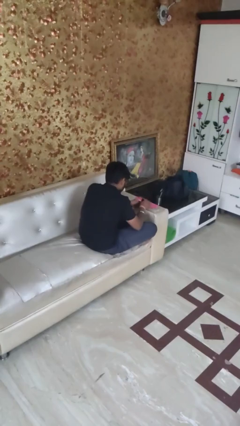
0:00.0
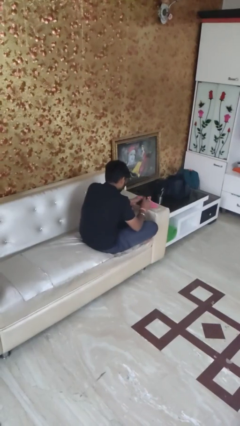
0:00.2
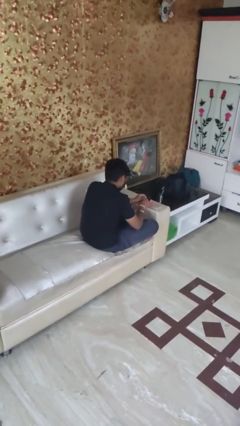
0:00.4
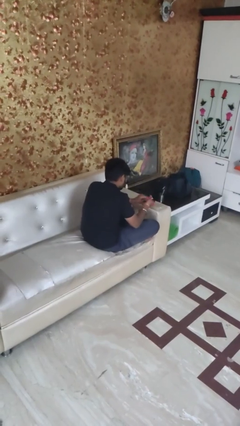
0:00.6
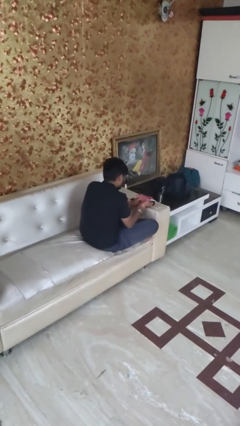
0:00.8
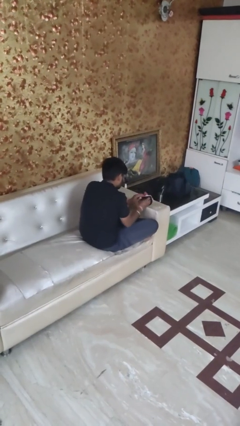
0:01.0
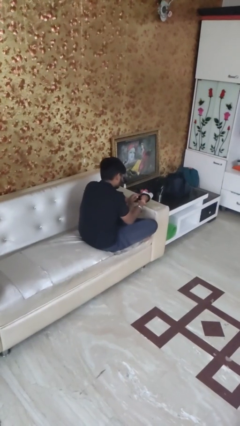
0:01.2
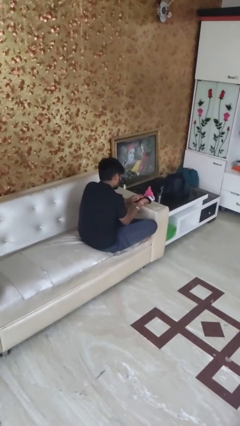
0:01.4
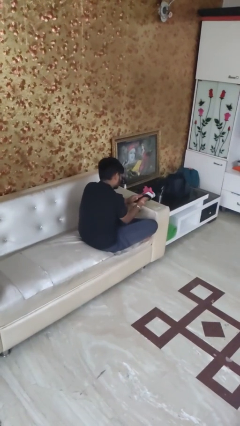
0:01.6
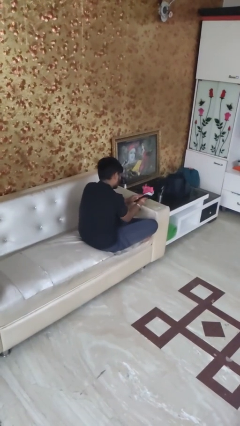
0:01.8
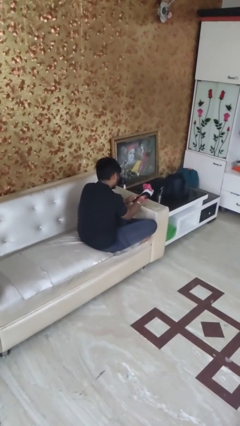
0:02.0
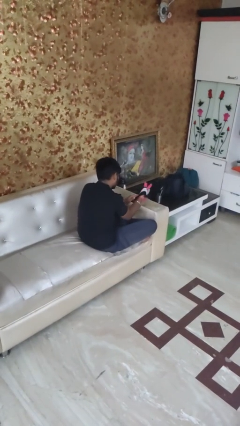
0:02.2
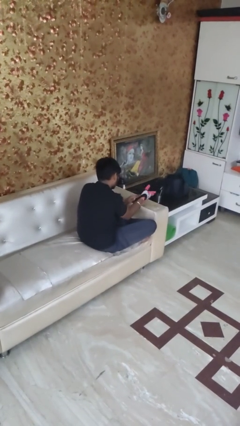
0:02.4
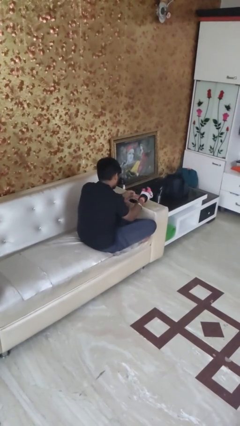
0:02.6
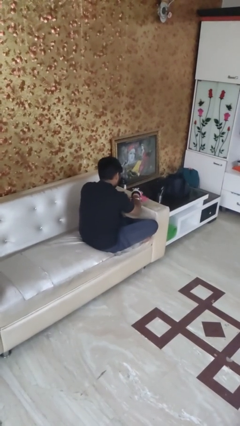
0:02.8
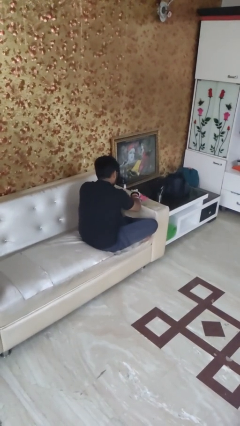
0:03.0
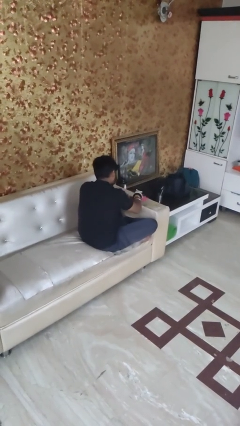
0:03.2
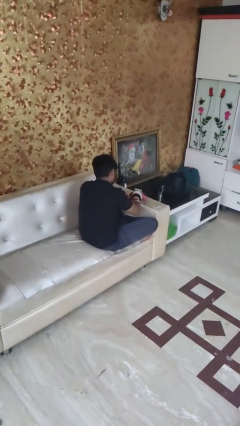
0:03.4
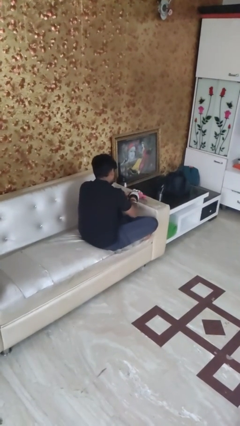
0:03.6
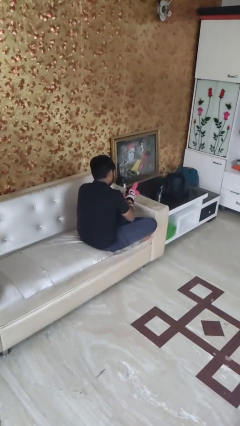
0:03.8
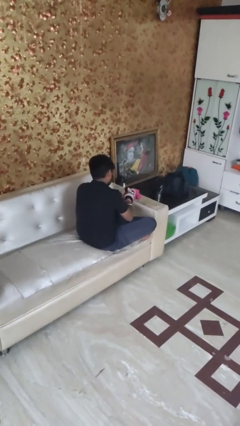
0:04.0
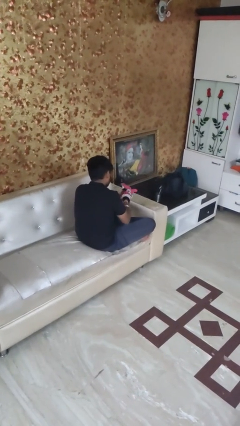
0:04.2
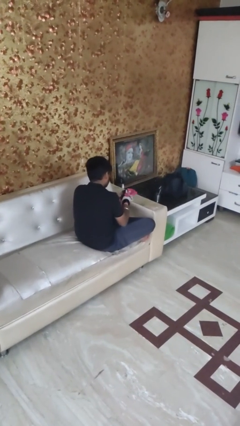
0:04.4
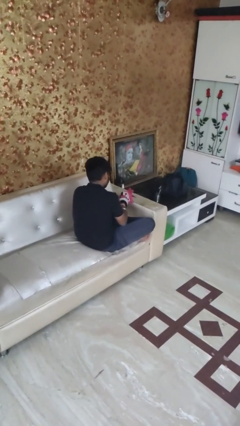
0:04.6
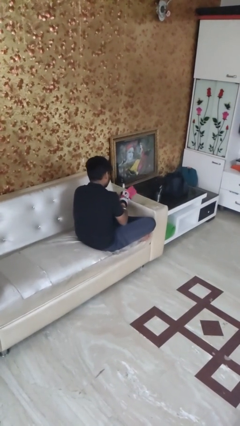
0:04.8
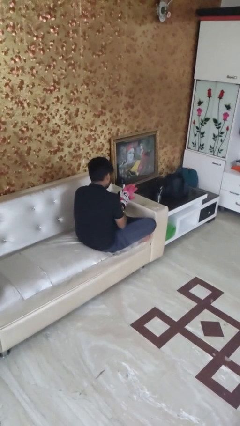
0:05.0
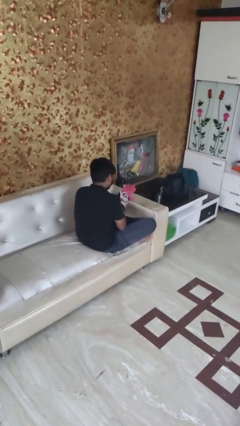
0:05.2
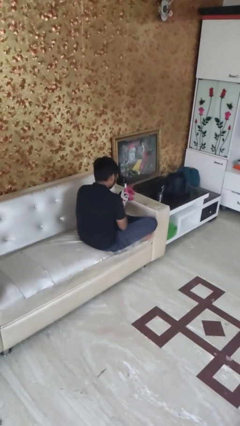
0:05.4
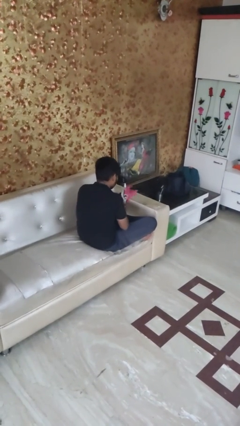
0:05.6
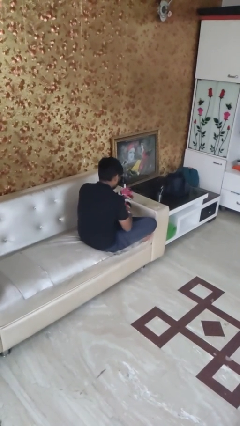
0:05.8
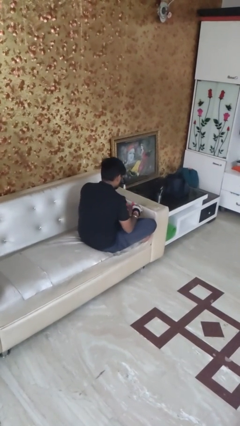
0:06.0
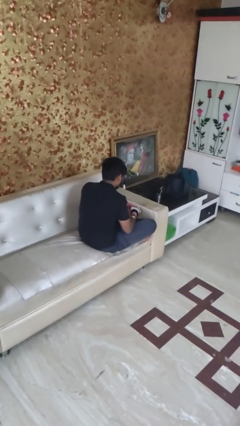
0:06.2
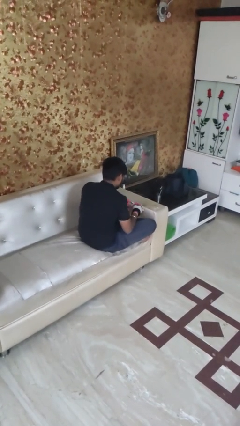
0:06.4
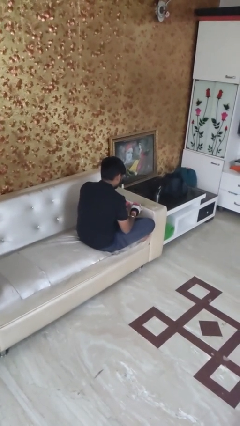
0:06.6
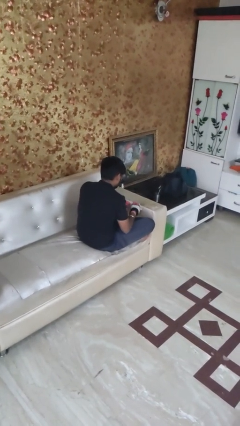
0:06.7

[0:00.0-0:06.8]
person puts on gloves

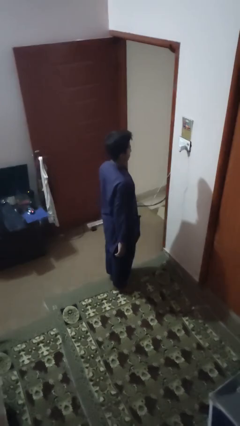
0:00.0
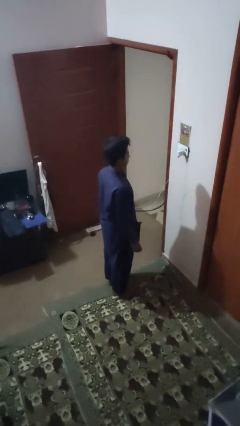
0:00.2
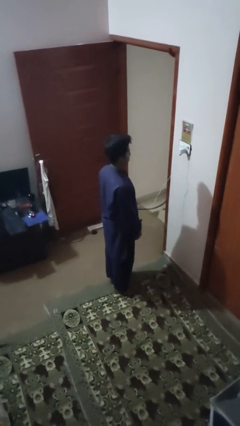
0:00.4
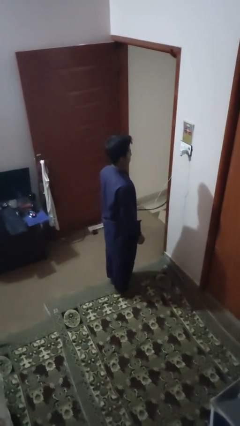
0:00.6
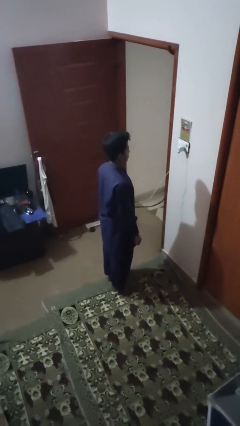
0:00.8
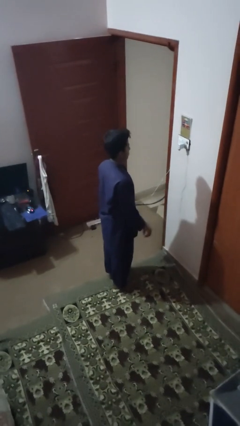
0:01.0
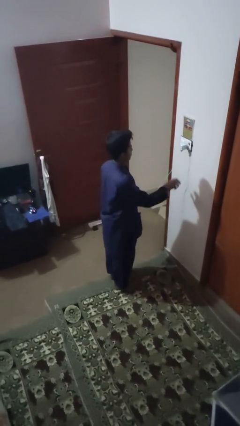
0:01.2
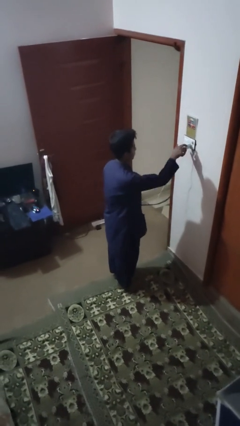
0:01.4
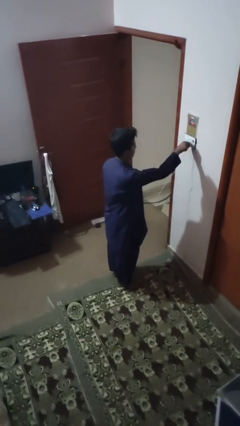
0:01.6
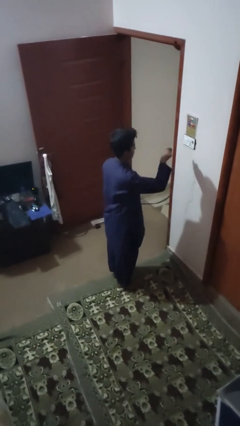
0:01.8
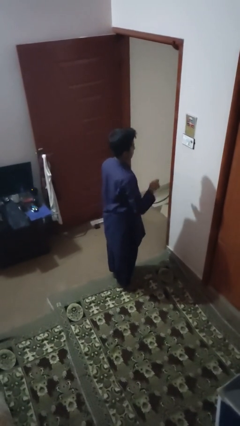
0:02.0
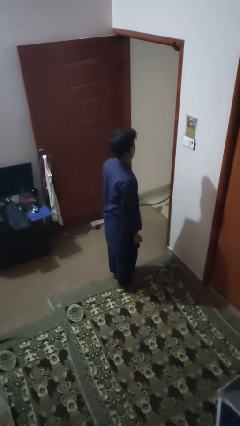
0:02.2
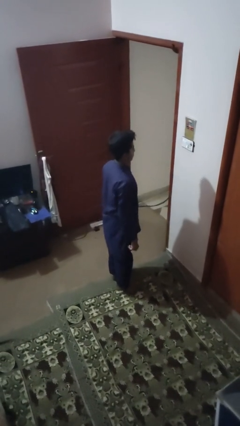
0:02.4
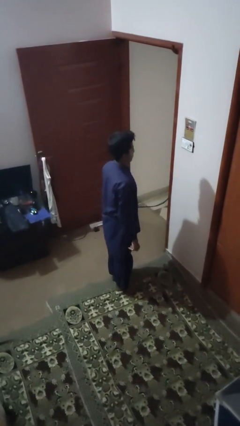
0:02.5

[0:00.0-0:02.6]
person unplugs from electrical socket

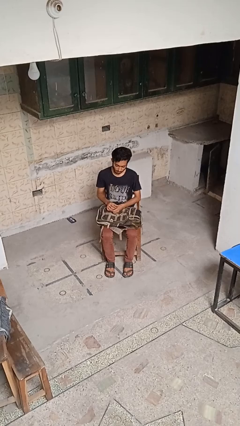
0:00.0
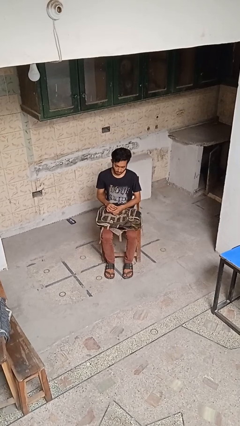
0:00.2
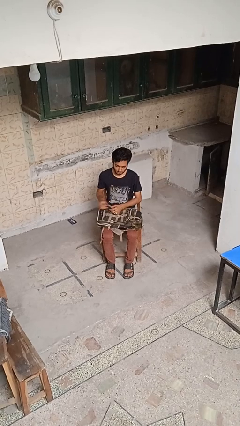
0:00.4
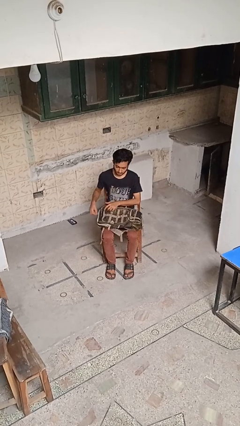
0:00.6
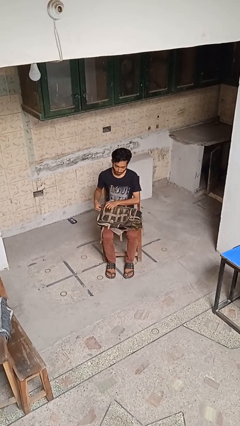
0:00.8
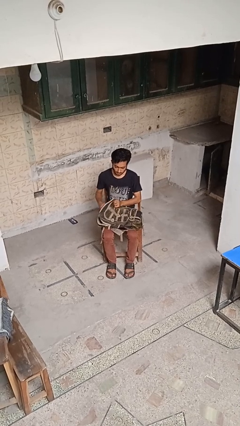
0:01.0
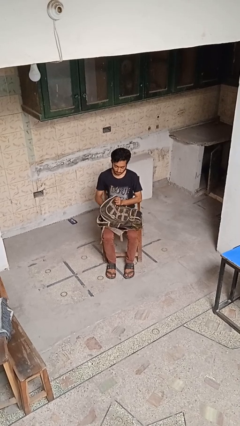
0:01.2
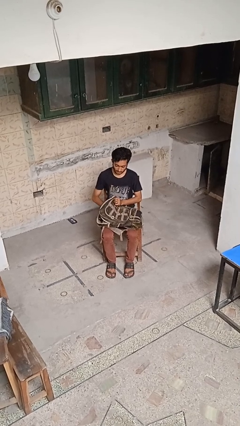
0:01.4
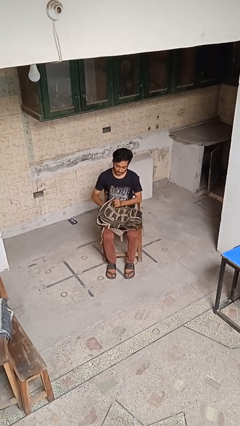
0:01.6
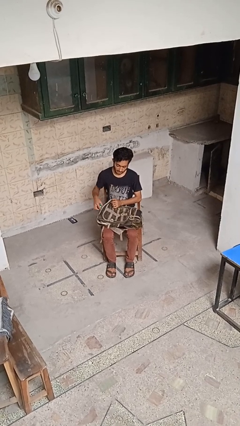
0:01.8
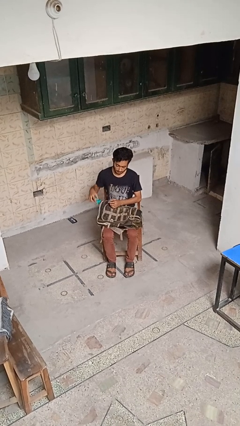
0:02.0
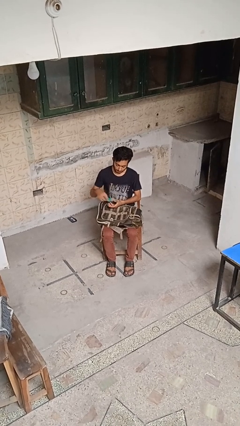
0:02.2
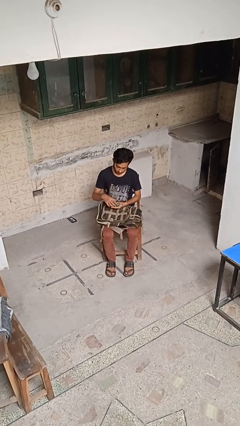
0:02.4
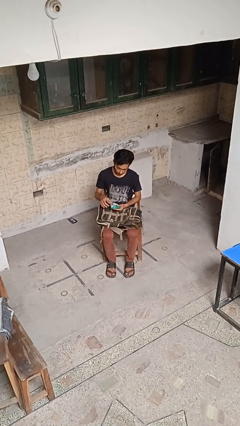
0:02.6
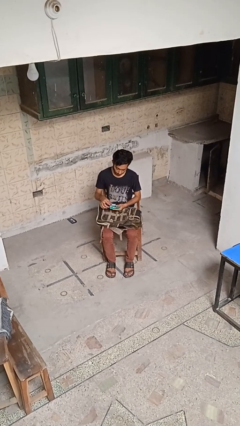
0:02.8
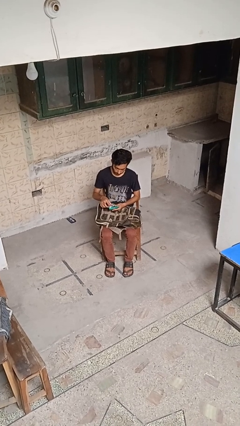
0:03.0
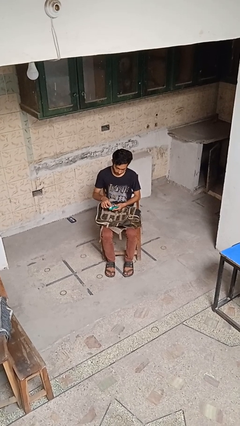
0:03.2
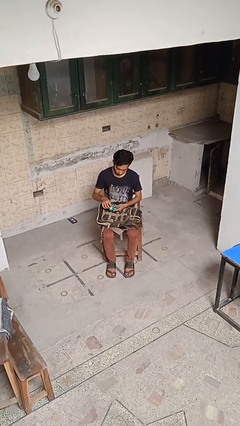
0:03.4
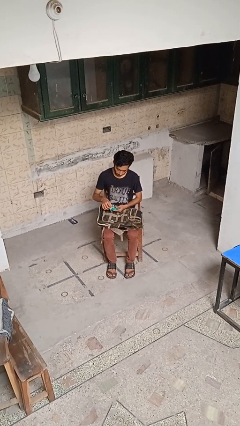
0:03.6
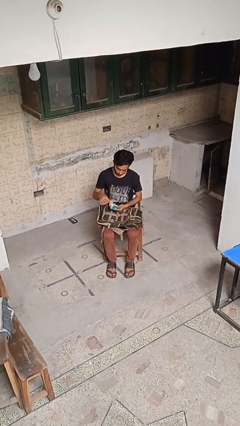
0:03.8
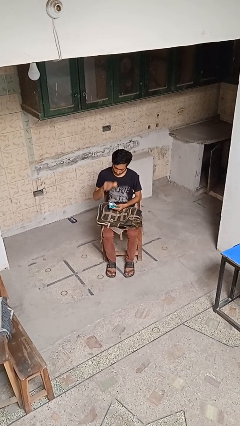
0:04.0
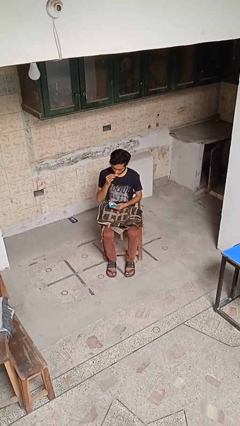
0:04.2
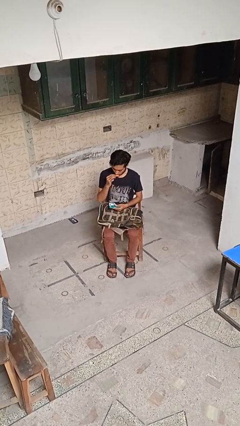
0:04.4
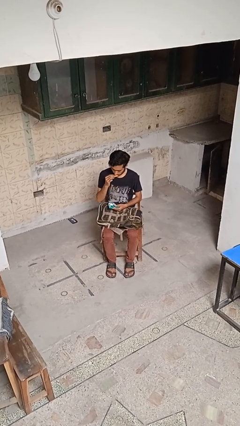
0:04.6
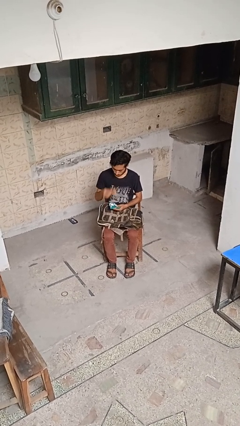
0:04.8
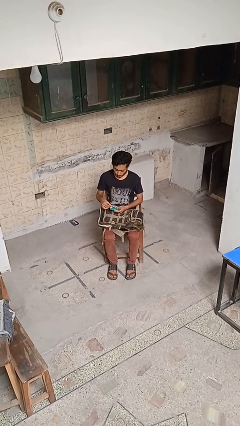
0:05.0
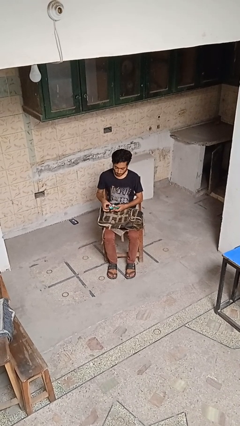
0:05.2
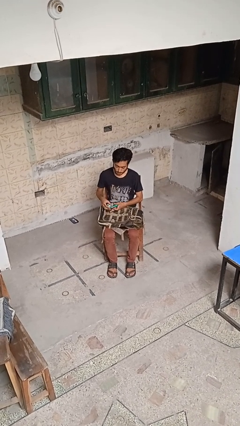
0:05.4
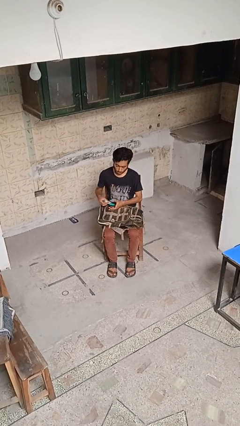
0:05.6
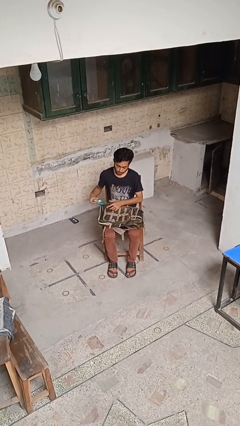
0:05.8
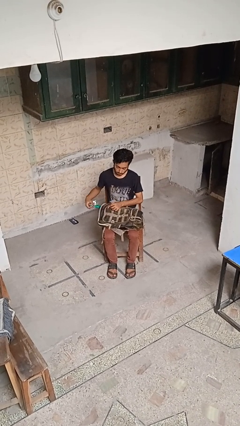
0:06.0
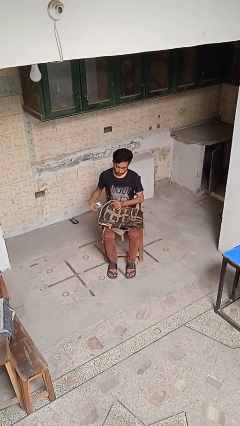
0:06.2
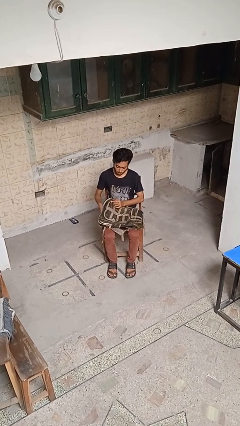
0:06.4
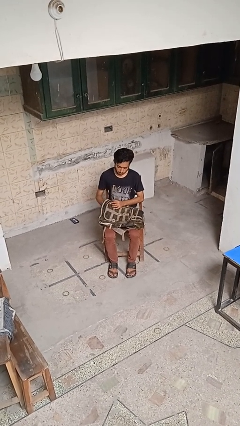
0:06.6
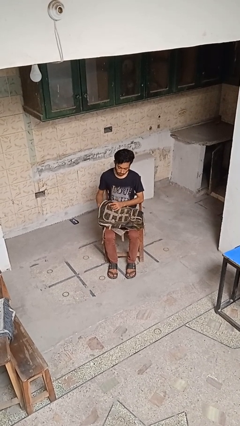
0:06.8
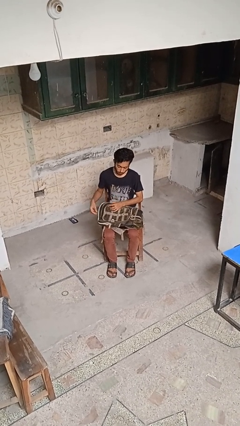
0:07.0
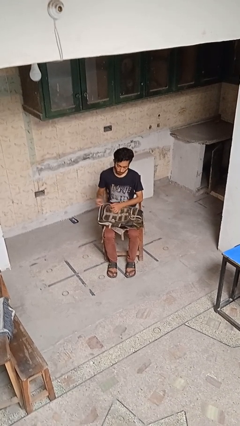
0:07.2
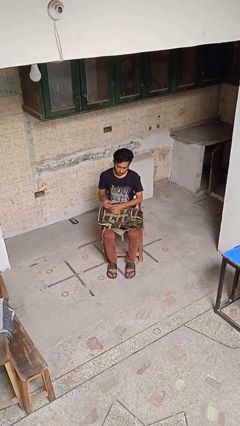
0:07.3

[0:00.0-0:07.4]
person eats snack from bag

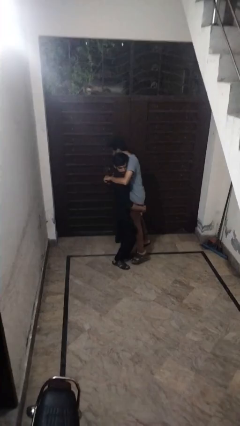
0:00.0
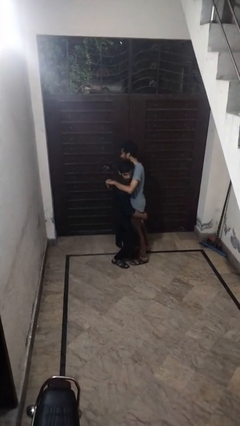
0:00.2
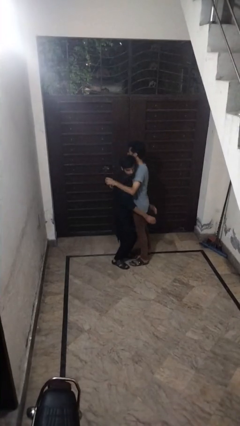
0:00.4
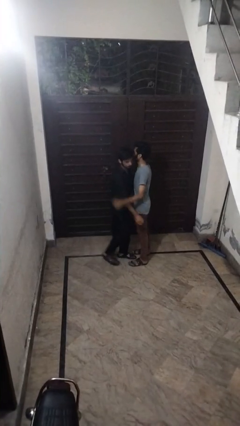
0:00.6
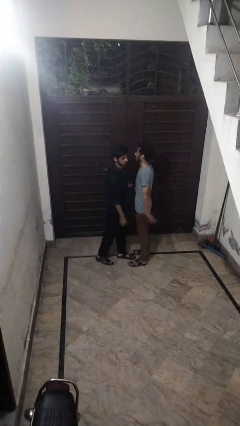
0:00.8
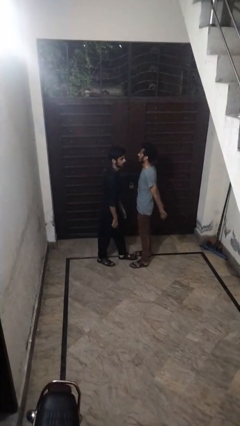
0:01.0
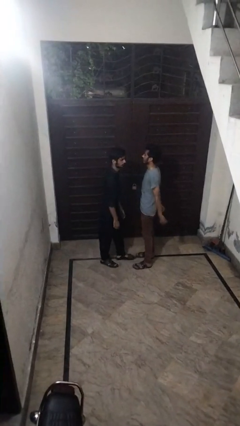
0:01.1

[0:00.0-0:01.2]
person puts down person
